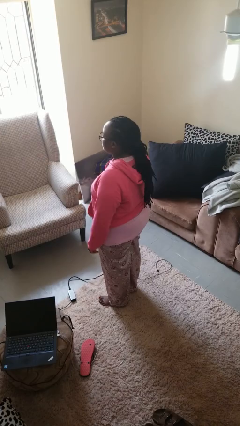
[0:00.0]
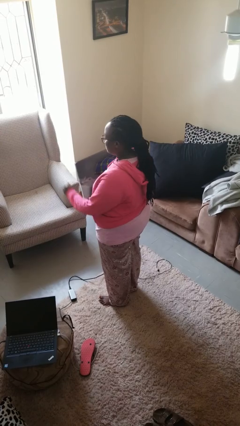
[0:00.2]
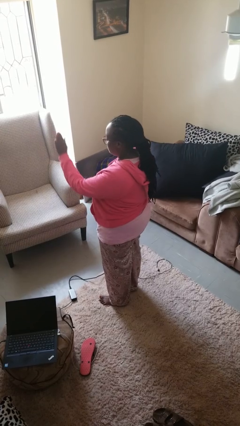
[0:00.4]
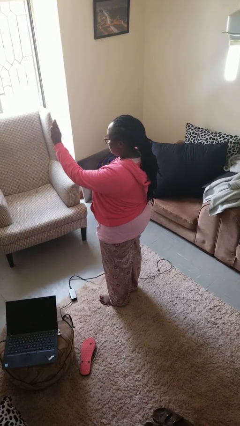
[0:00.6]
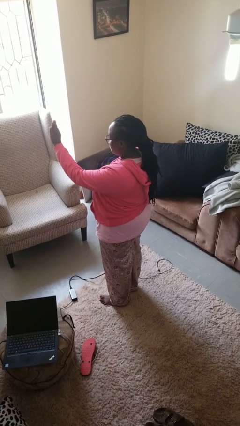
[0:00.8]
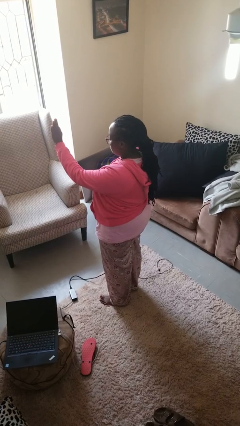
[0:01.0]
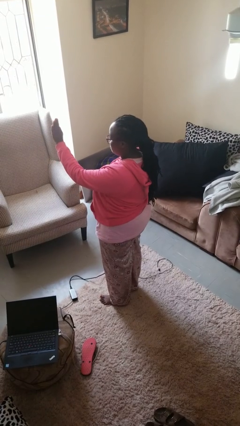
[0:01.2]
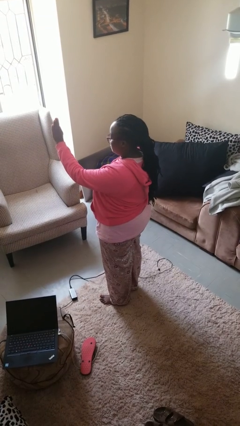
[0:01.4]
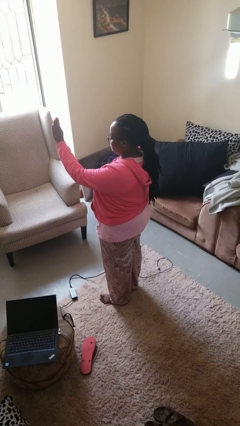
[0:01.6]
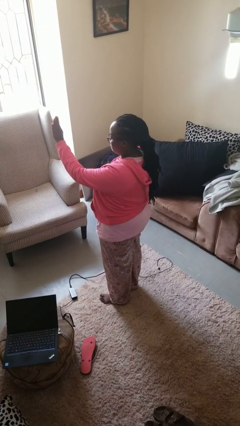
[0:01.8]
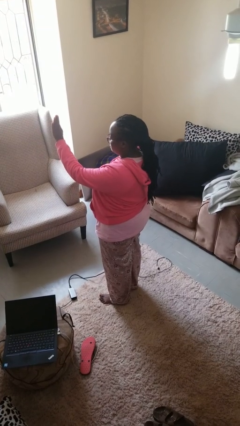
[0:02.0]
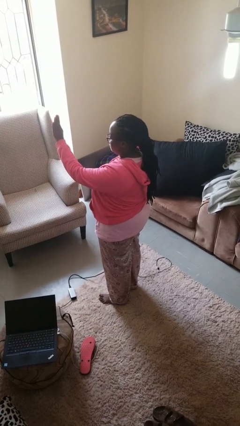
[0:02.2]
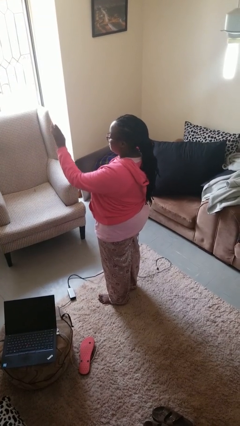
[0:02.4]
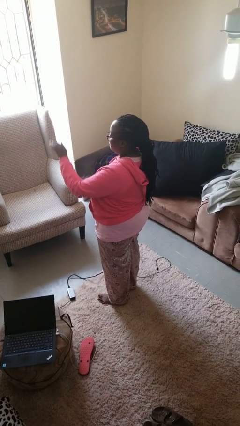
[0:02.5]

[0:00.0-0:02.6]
person gestures stop

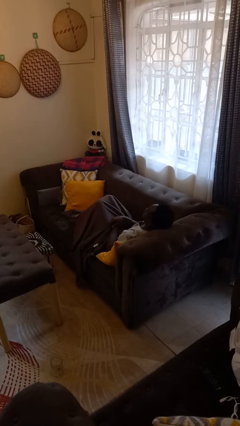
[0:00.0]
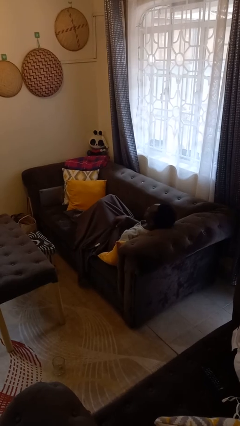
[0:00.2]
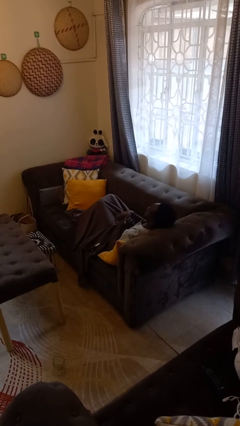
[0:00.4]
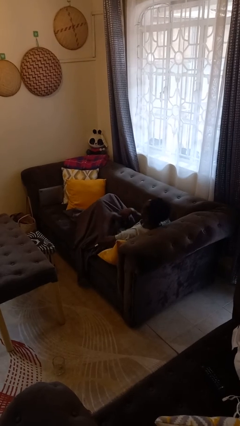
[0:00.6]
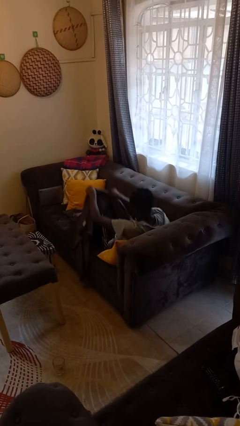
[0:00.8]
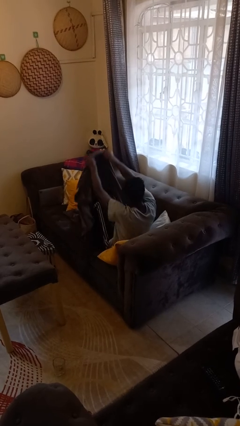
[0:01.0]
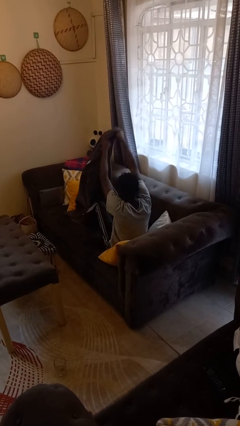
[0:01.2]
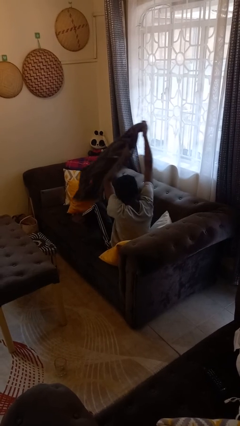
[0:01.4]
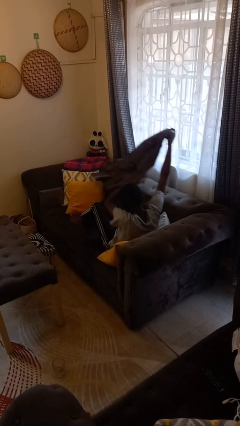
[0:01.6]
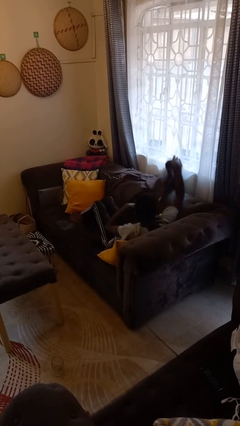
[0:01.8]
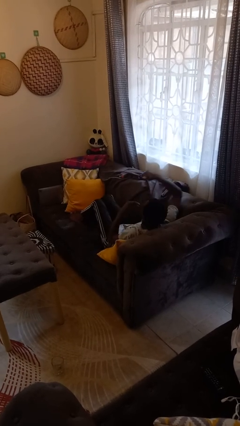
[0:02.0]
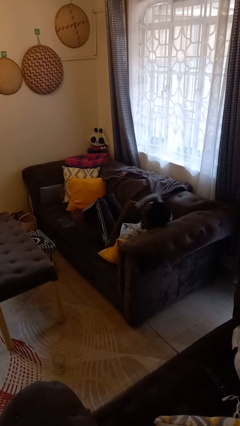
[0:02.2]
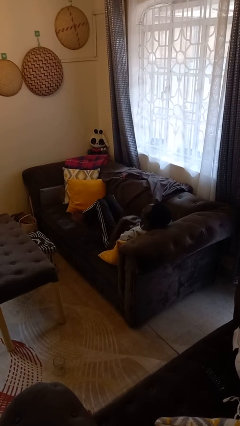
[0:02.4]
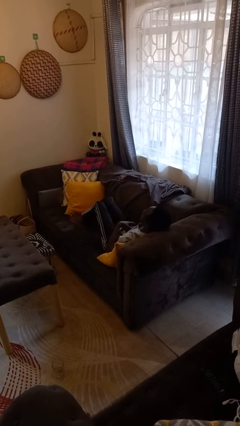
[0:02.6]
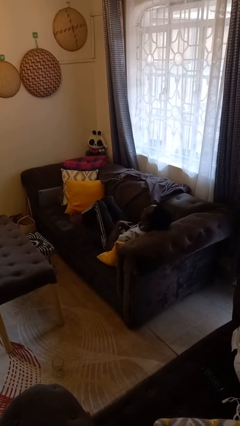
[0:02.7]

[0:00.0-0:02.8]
person uncovers with blanket

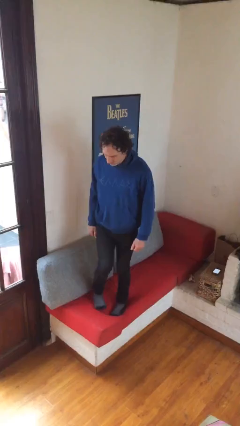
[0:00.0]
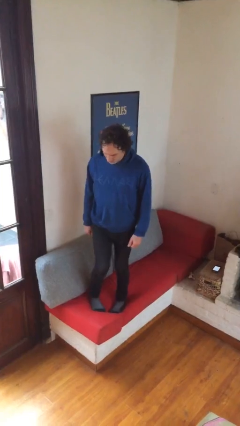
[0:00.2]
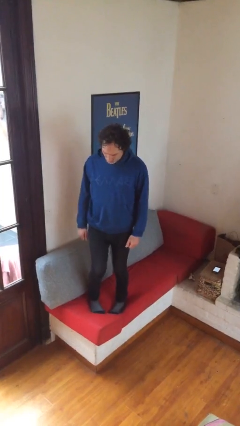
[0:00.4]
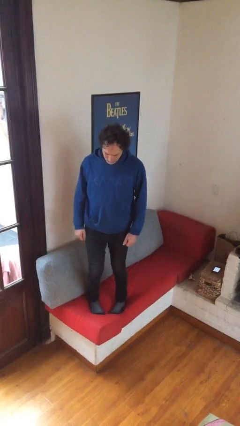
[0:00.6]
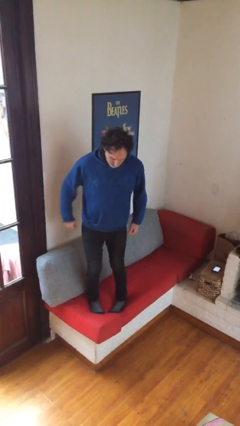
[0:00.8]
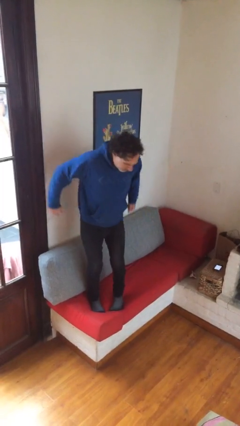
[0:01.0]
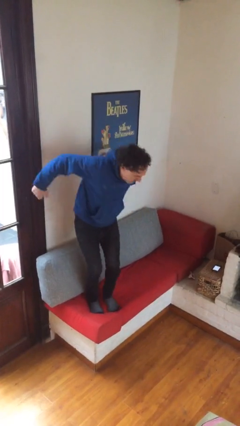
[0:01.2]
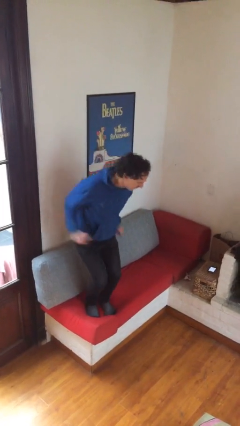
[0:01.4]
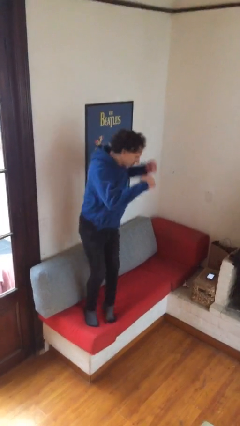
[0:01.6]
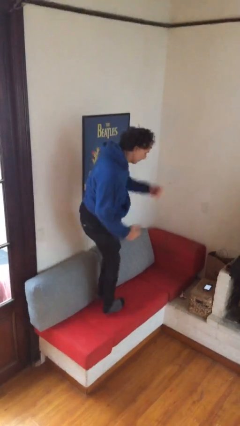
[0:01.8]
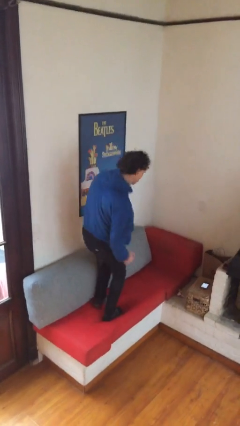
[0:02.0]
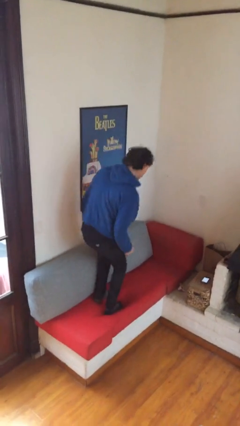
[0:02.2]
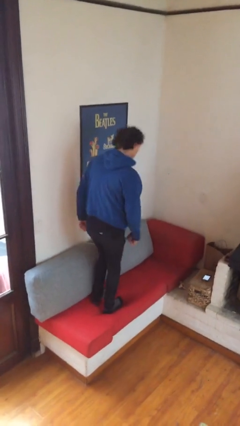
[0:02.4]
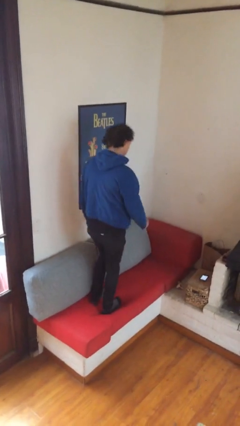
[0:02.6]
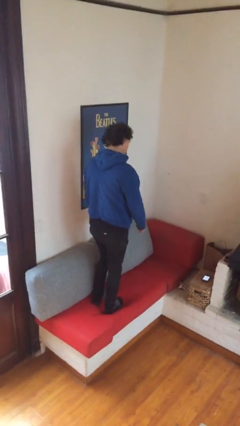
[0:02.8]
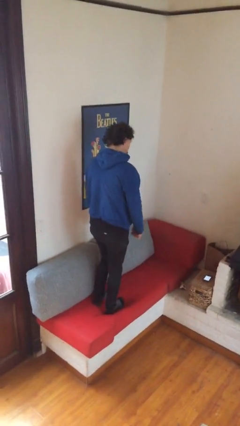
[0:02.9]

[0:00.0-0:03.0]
person jumps on couch

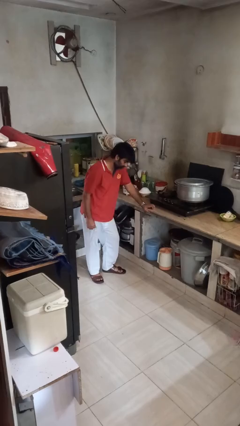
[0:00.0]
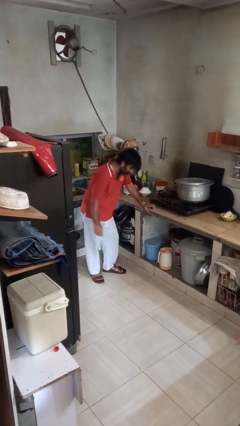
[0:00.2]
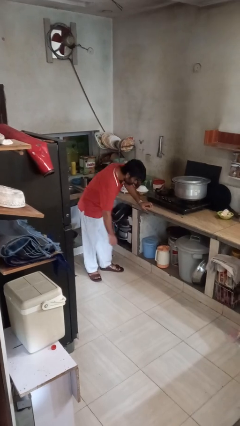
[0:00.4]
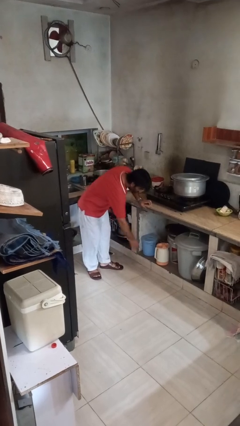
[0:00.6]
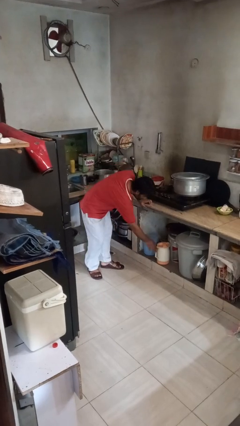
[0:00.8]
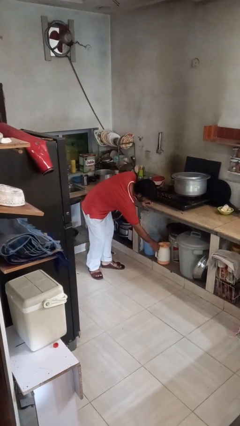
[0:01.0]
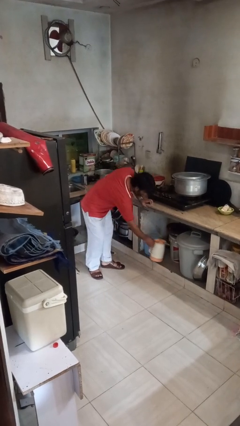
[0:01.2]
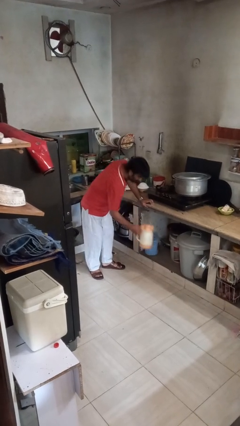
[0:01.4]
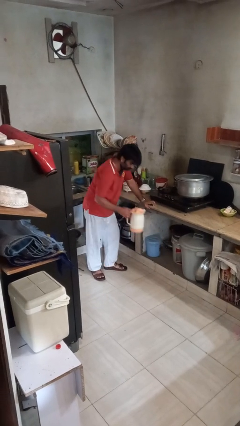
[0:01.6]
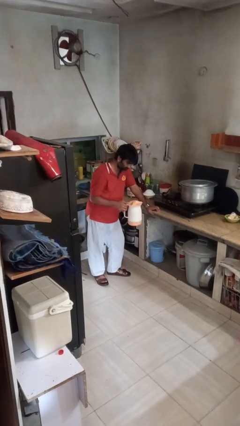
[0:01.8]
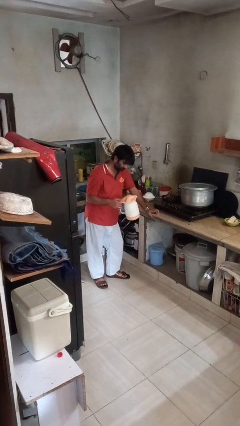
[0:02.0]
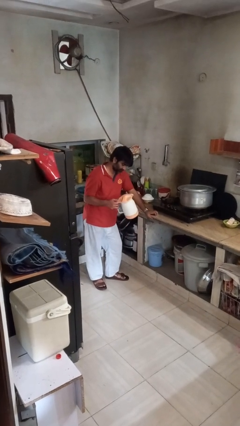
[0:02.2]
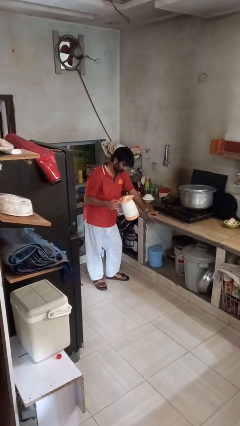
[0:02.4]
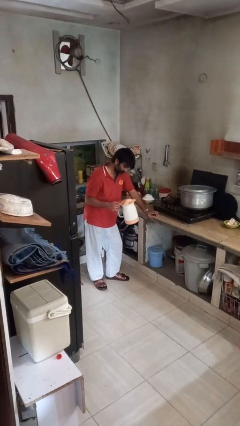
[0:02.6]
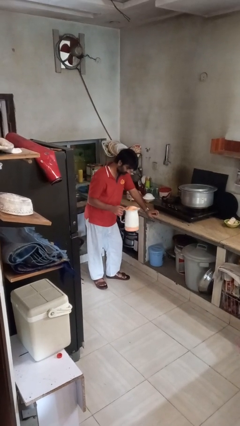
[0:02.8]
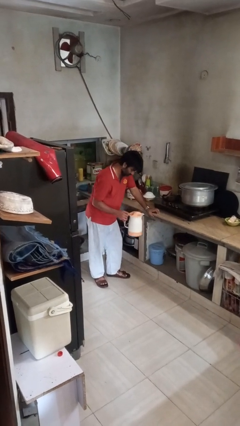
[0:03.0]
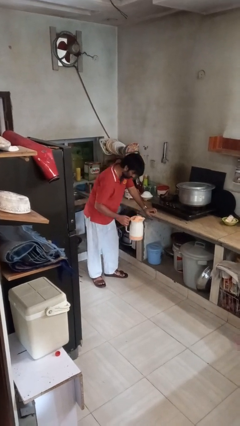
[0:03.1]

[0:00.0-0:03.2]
person picks up object from cabinet

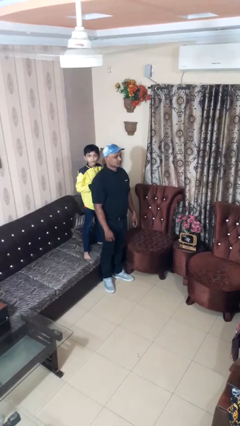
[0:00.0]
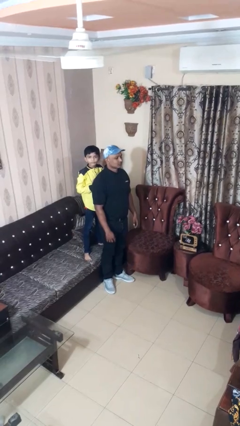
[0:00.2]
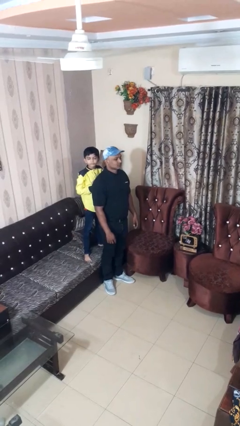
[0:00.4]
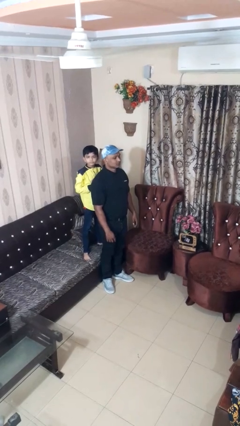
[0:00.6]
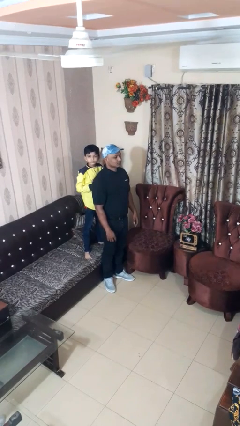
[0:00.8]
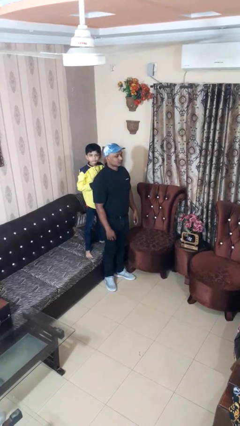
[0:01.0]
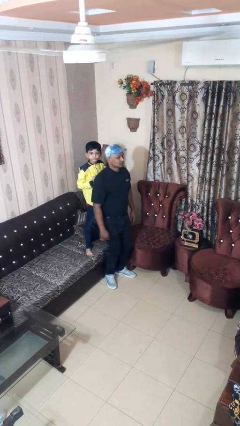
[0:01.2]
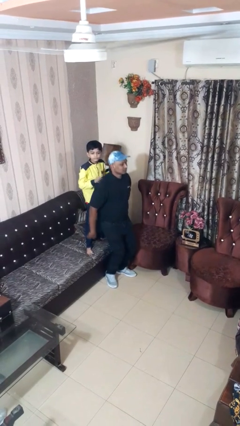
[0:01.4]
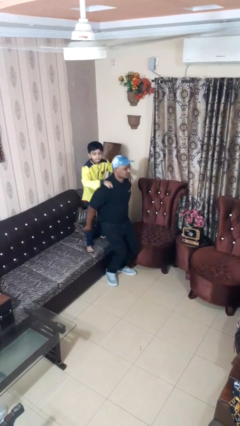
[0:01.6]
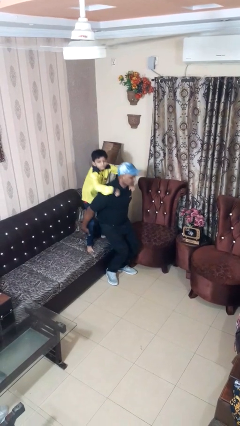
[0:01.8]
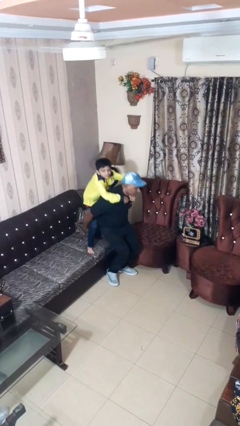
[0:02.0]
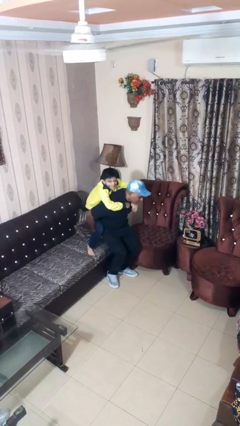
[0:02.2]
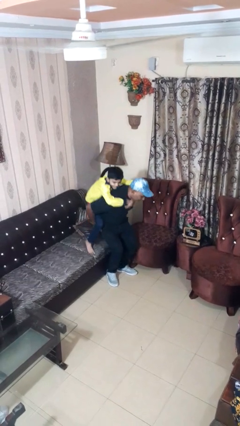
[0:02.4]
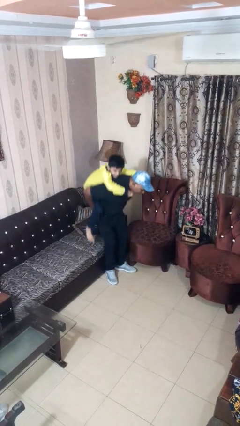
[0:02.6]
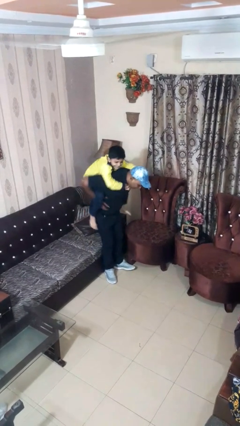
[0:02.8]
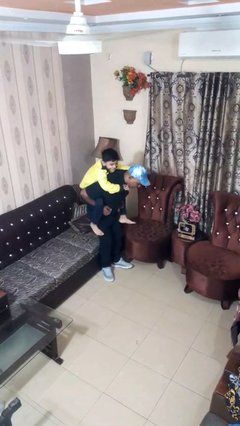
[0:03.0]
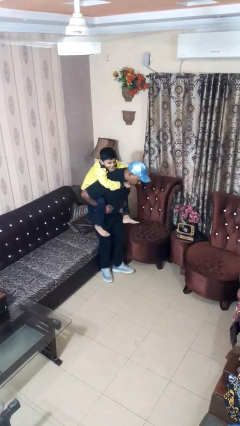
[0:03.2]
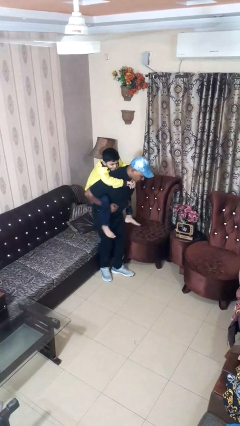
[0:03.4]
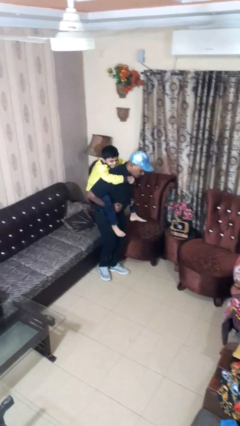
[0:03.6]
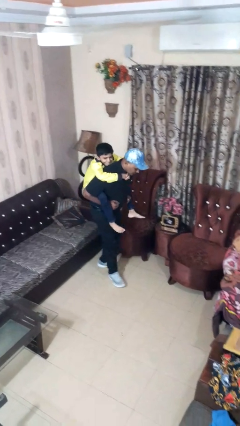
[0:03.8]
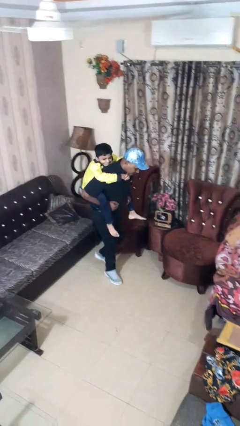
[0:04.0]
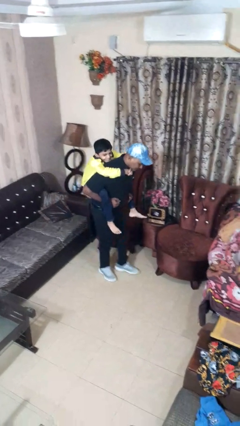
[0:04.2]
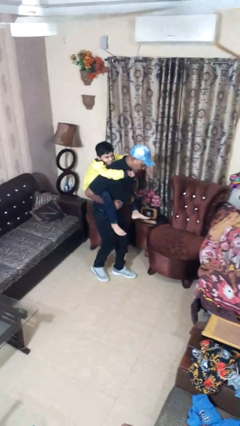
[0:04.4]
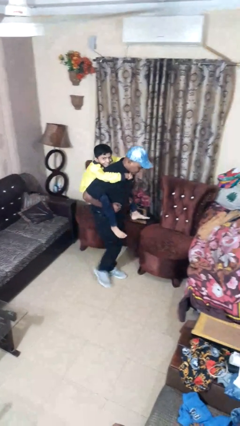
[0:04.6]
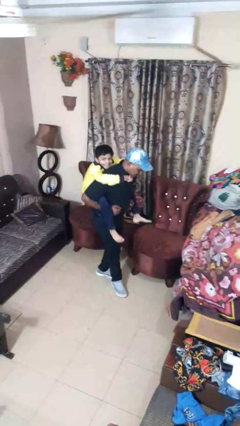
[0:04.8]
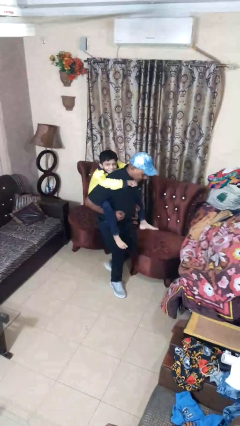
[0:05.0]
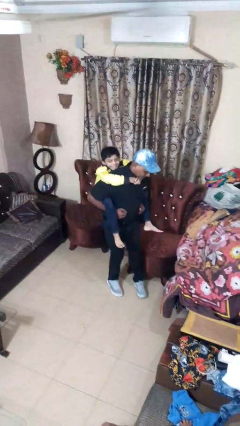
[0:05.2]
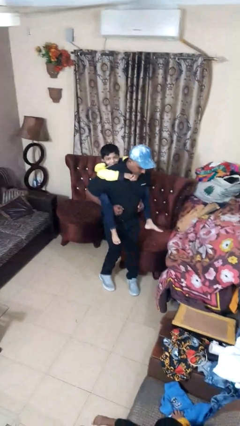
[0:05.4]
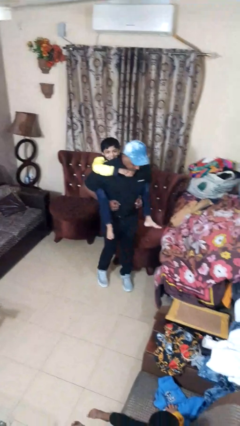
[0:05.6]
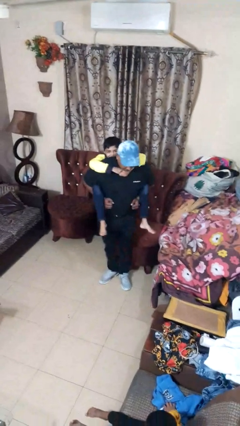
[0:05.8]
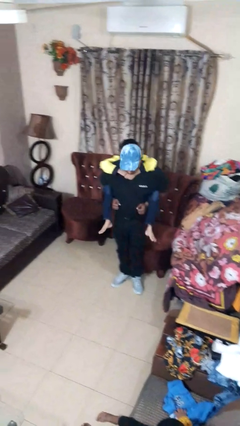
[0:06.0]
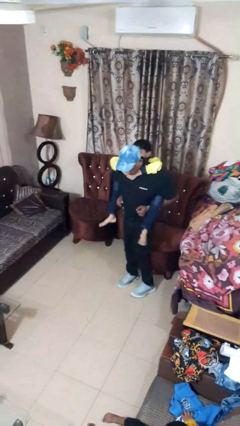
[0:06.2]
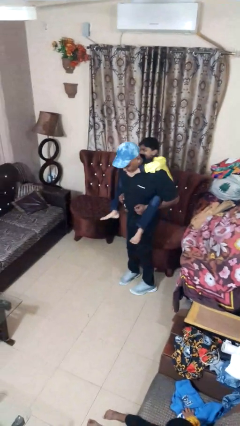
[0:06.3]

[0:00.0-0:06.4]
person carries person on back
